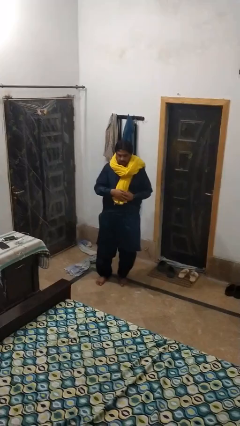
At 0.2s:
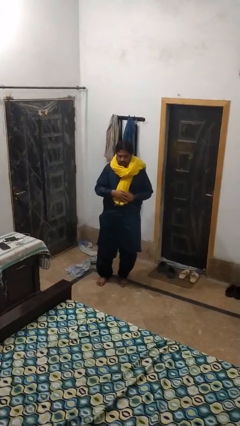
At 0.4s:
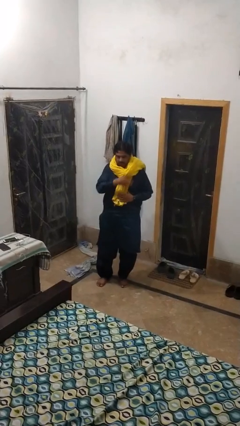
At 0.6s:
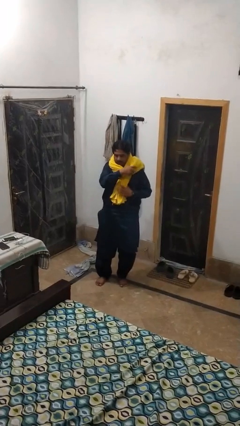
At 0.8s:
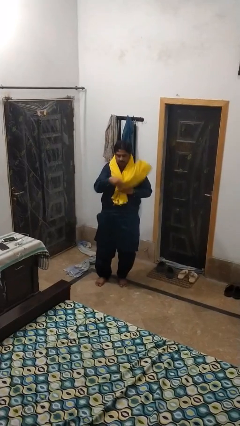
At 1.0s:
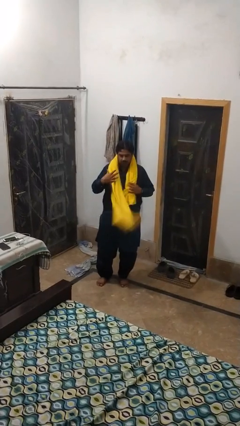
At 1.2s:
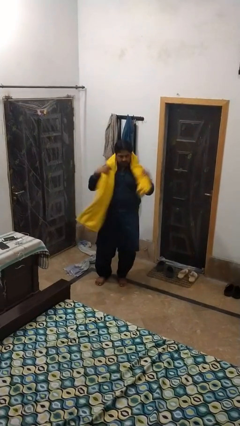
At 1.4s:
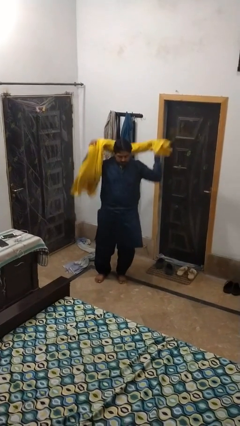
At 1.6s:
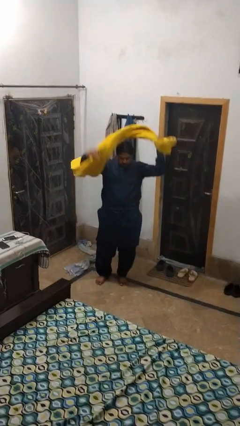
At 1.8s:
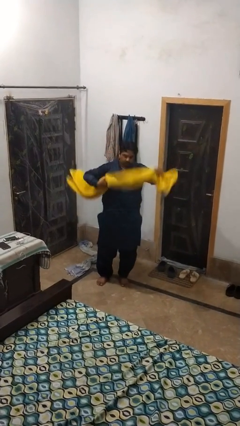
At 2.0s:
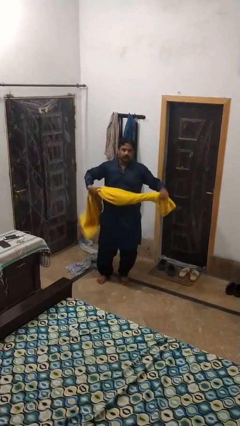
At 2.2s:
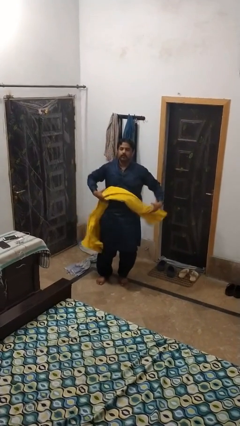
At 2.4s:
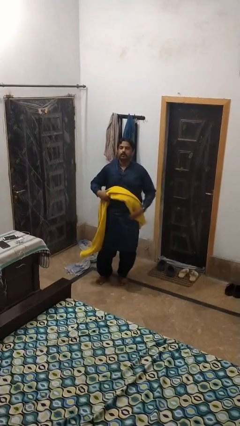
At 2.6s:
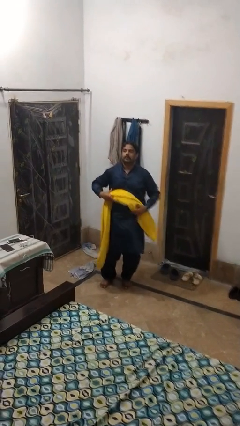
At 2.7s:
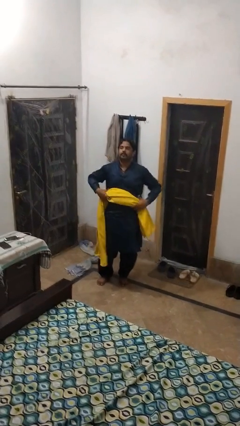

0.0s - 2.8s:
person takes off scarf

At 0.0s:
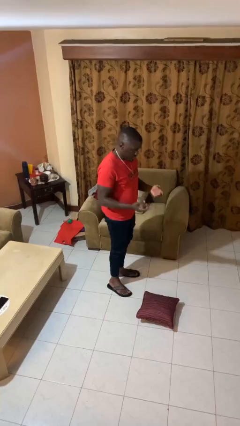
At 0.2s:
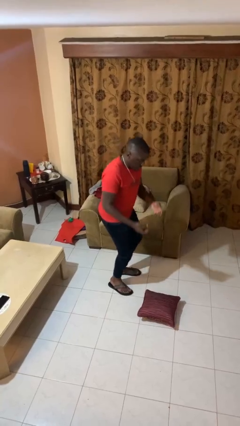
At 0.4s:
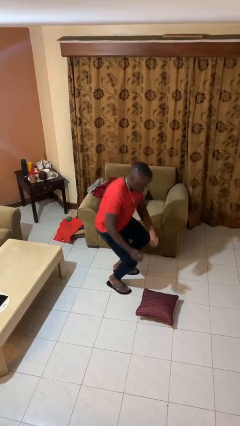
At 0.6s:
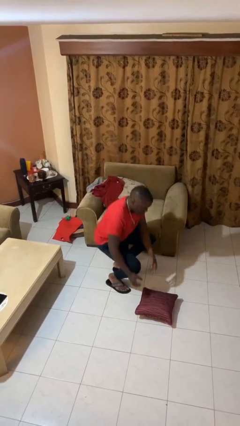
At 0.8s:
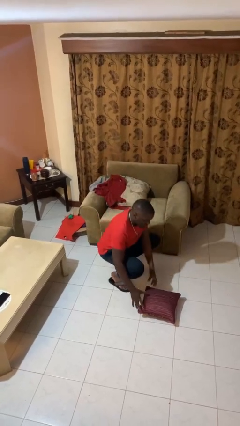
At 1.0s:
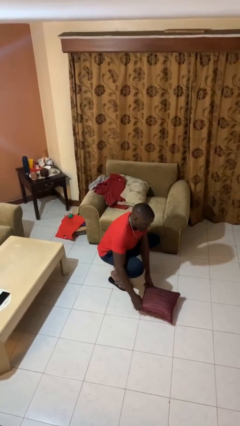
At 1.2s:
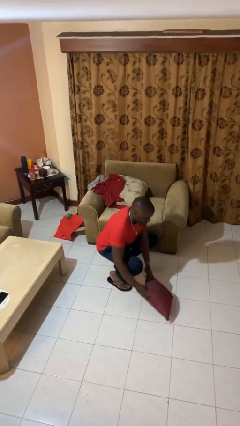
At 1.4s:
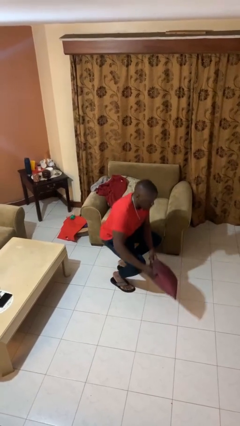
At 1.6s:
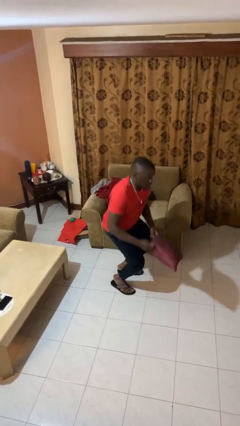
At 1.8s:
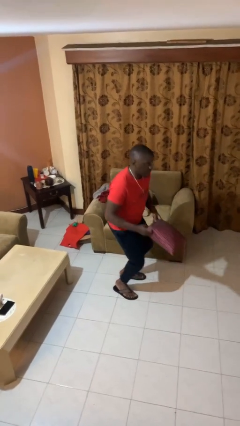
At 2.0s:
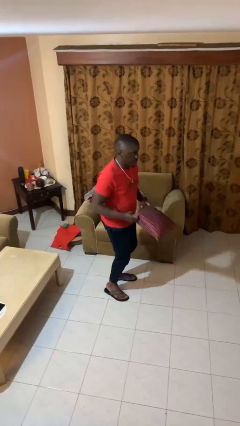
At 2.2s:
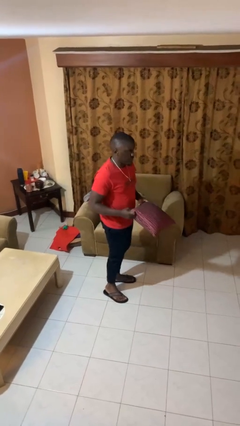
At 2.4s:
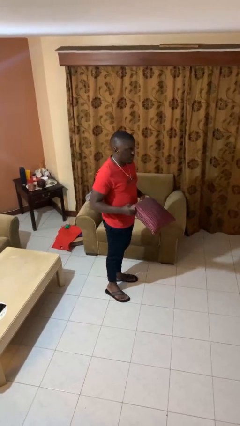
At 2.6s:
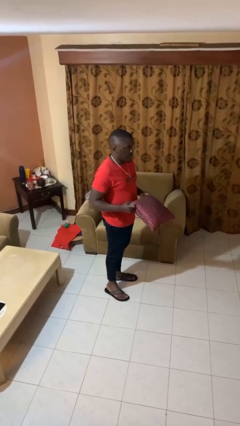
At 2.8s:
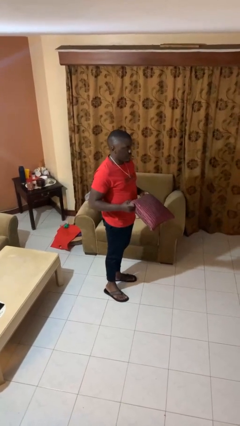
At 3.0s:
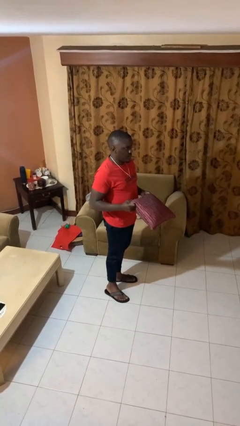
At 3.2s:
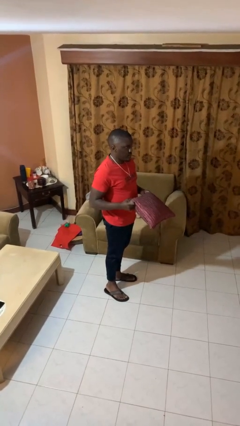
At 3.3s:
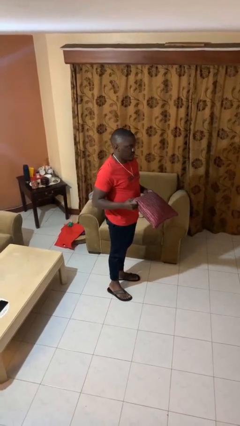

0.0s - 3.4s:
person picks up object from floor

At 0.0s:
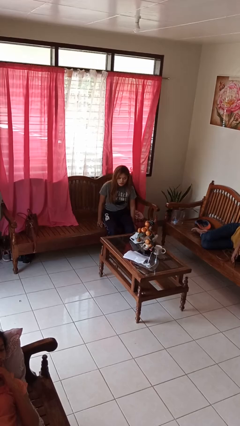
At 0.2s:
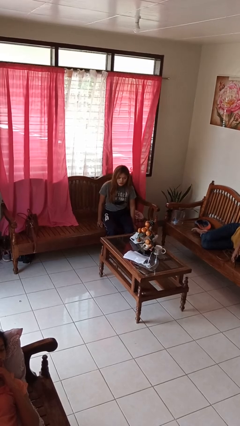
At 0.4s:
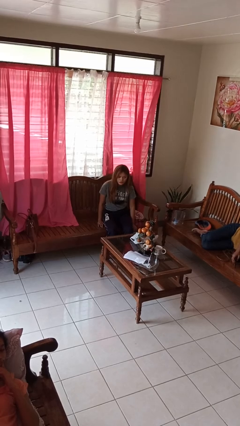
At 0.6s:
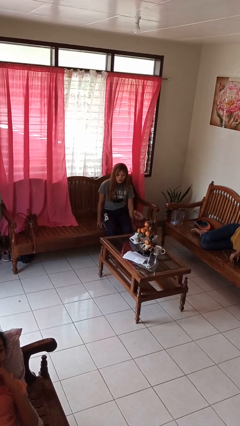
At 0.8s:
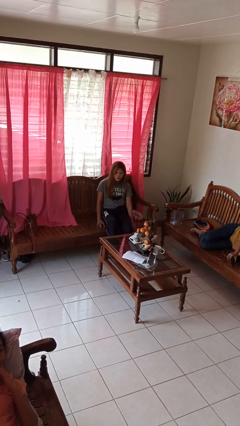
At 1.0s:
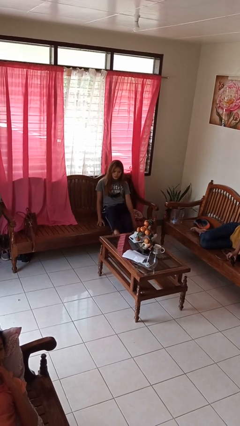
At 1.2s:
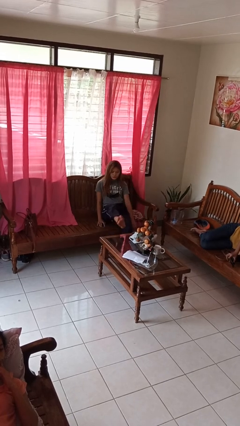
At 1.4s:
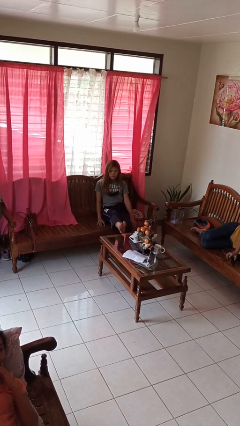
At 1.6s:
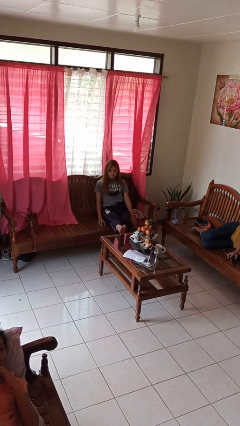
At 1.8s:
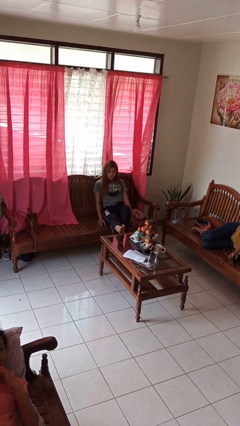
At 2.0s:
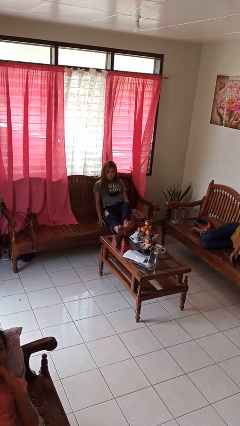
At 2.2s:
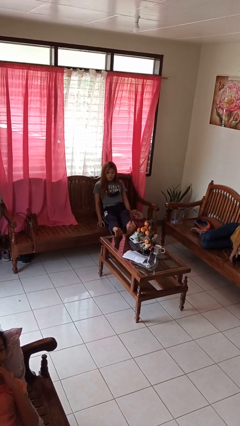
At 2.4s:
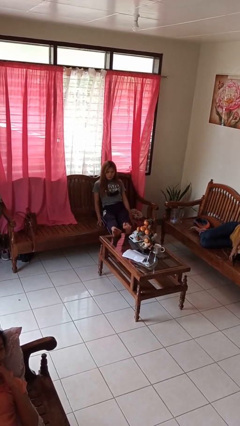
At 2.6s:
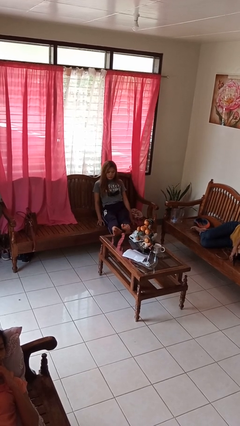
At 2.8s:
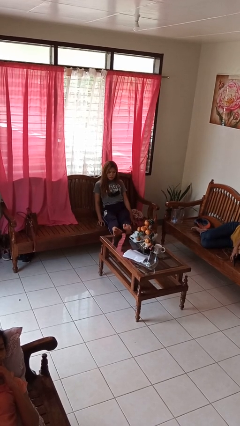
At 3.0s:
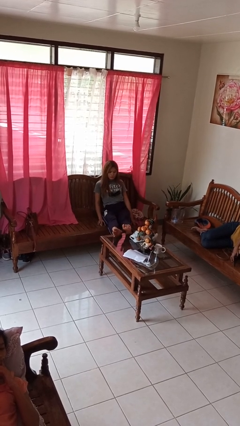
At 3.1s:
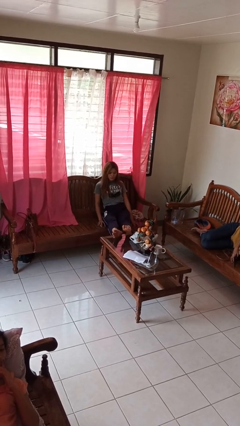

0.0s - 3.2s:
person puts feet up

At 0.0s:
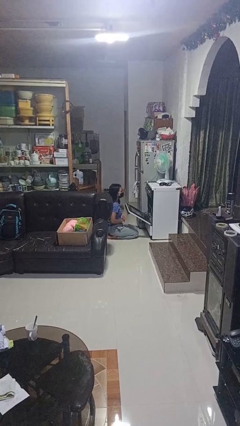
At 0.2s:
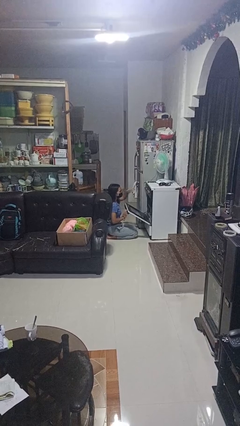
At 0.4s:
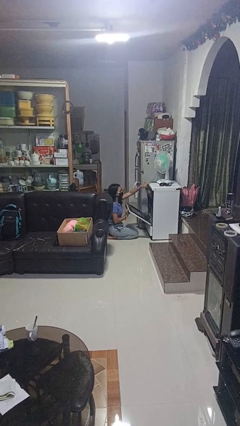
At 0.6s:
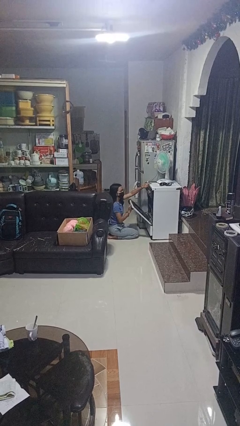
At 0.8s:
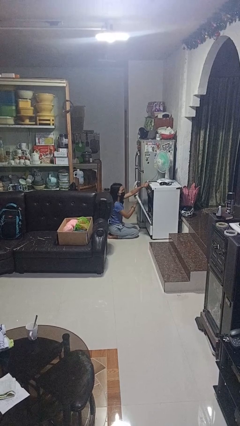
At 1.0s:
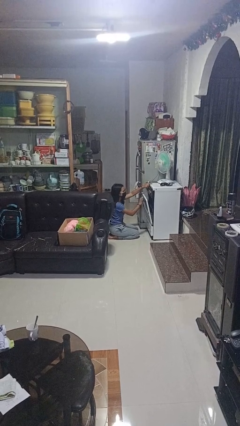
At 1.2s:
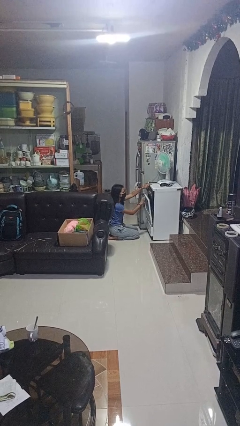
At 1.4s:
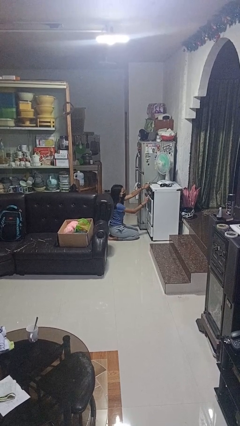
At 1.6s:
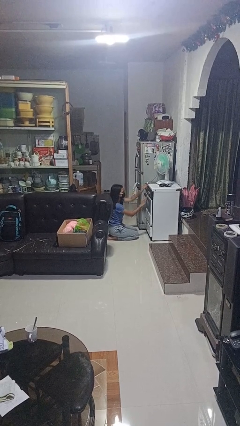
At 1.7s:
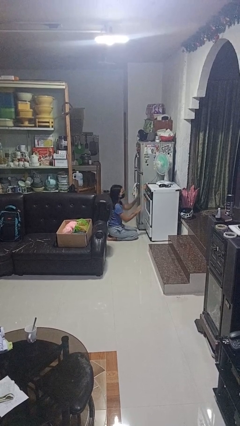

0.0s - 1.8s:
person closes oven door

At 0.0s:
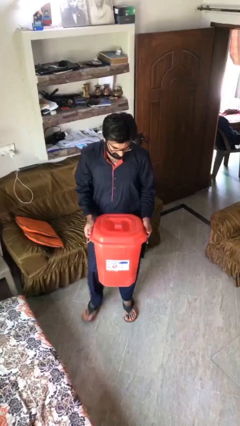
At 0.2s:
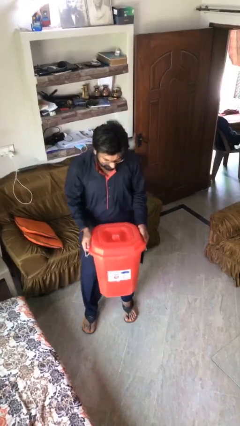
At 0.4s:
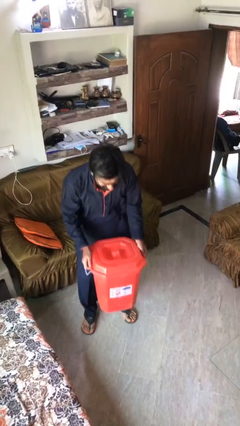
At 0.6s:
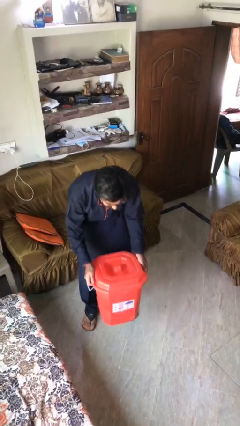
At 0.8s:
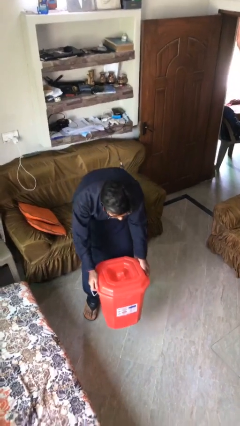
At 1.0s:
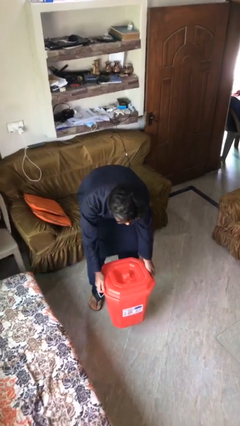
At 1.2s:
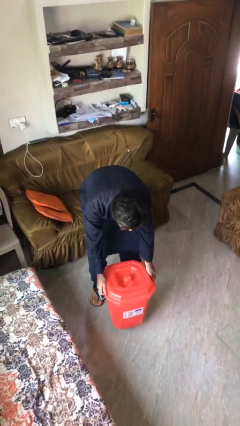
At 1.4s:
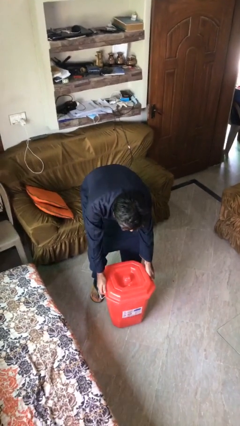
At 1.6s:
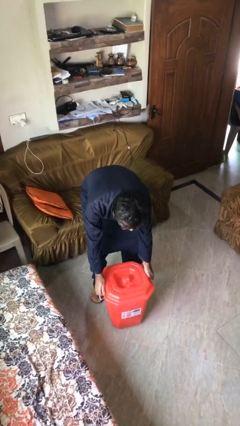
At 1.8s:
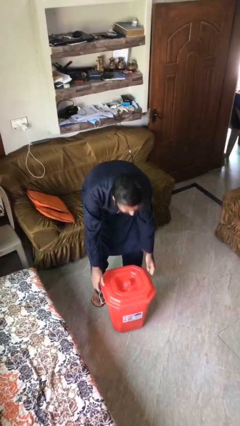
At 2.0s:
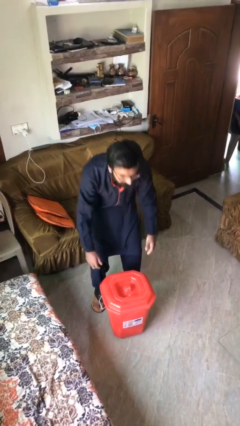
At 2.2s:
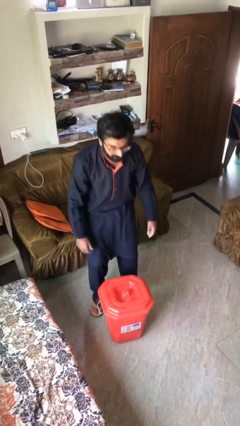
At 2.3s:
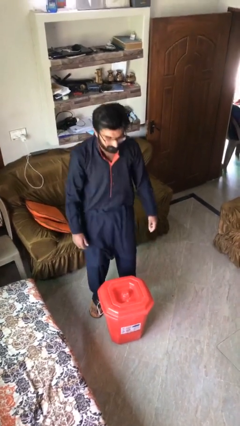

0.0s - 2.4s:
person puts down object on floor

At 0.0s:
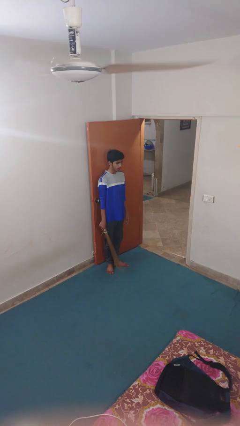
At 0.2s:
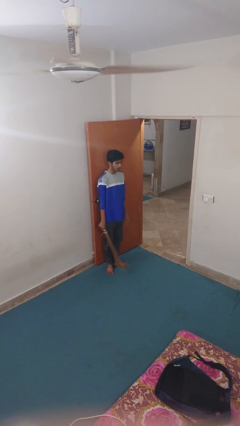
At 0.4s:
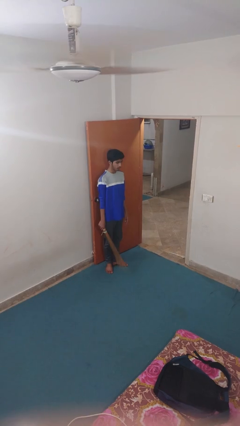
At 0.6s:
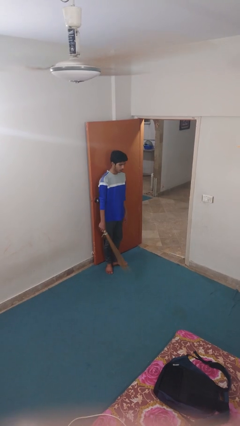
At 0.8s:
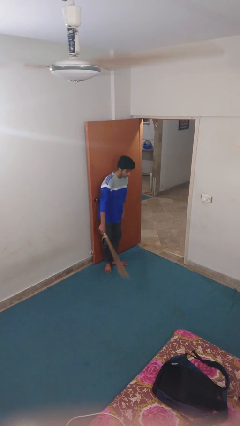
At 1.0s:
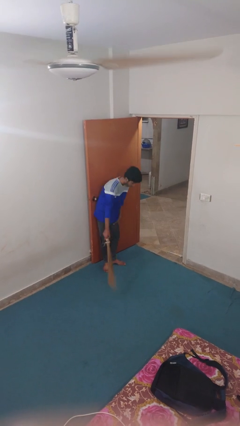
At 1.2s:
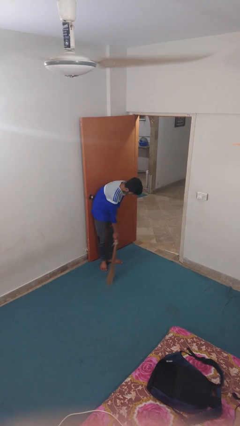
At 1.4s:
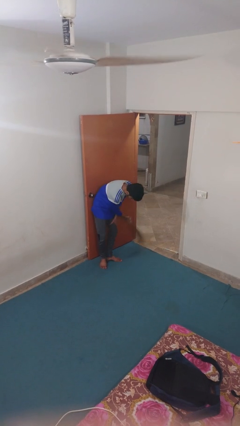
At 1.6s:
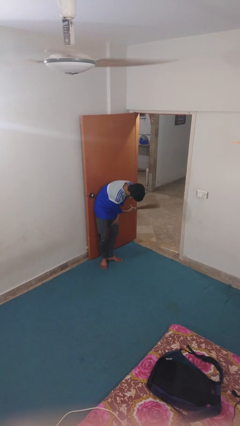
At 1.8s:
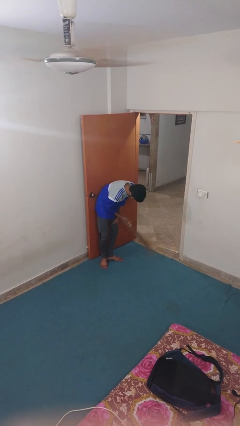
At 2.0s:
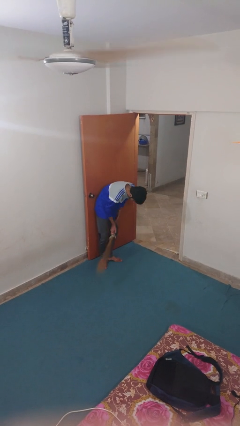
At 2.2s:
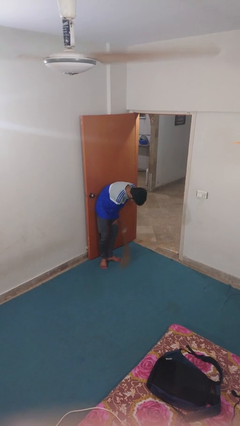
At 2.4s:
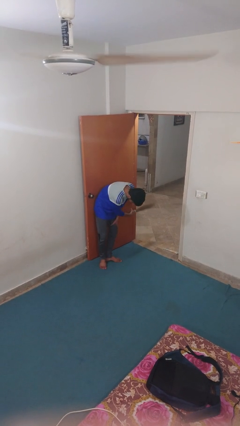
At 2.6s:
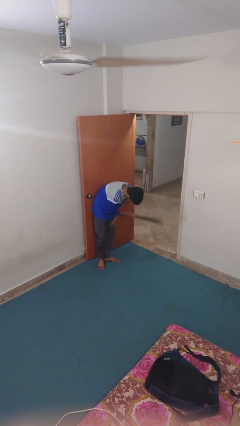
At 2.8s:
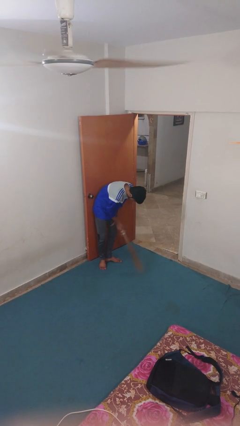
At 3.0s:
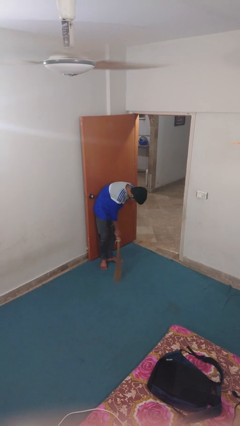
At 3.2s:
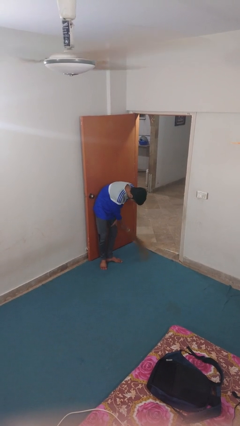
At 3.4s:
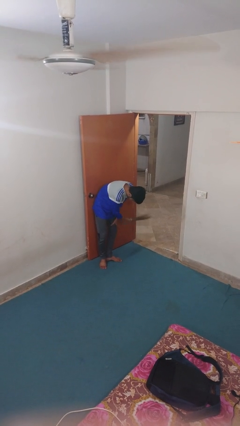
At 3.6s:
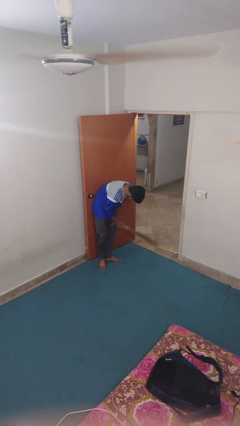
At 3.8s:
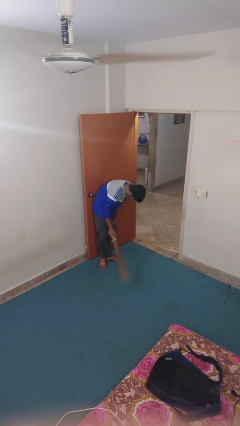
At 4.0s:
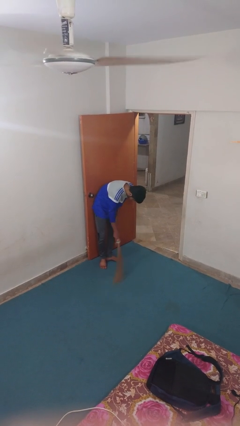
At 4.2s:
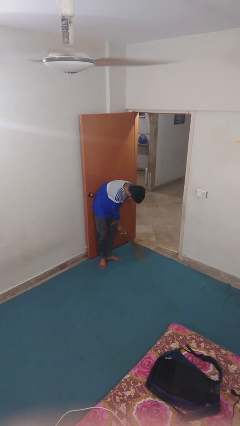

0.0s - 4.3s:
person sweeps floor
